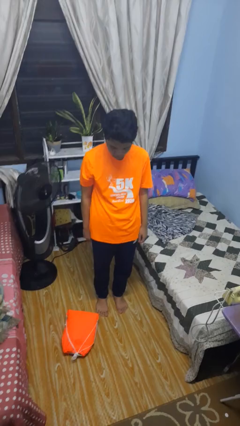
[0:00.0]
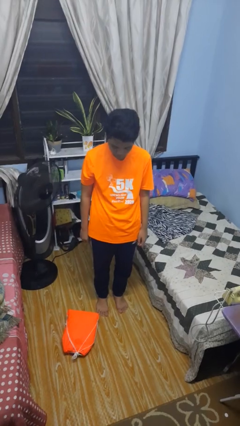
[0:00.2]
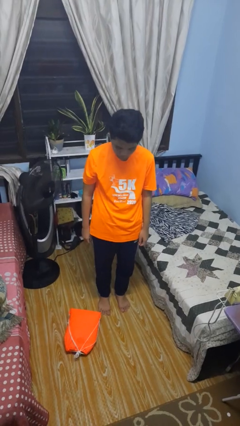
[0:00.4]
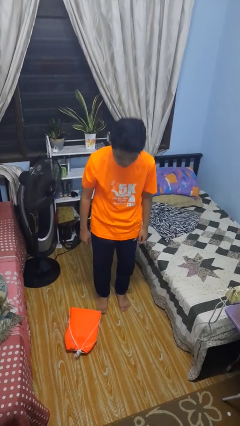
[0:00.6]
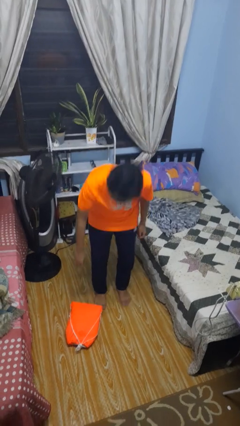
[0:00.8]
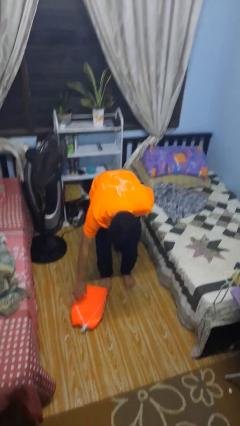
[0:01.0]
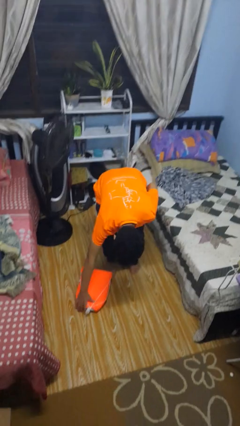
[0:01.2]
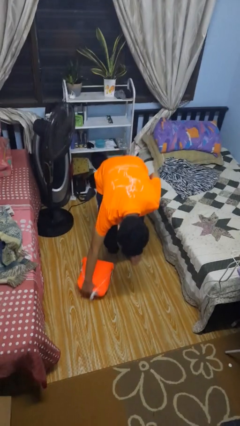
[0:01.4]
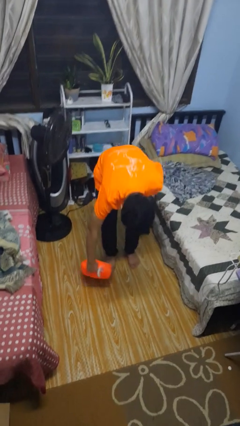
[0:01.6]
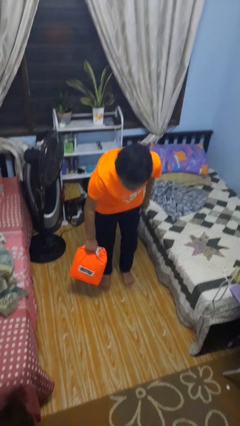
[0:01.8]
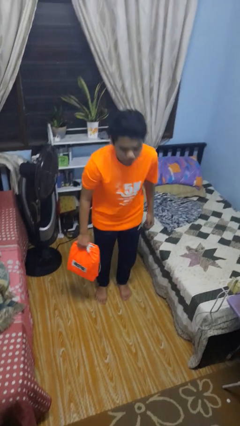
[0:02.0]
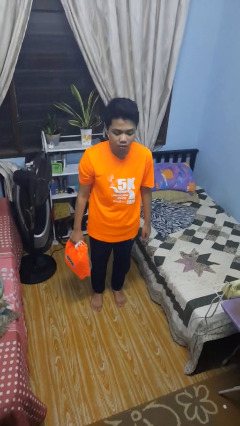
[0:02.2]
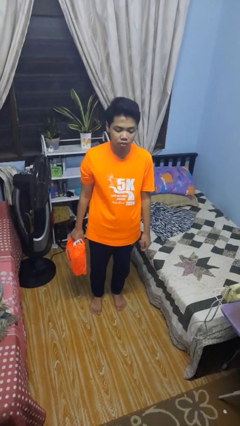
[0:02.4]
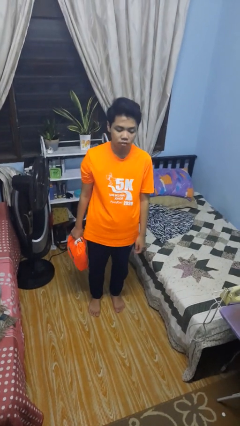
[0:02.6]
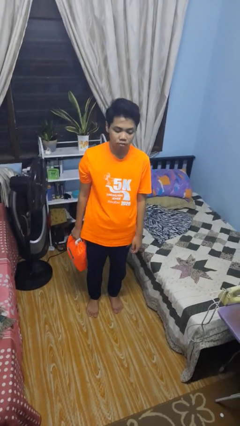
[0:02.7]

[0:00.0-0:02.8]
person picks up object from floor

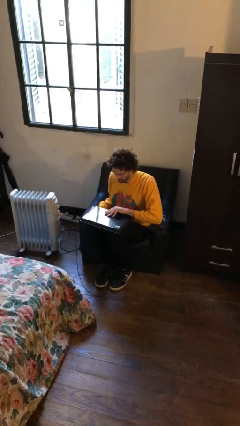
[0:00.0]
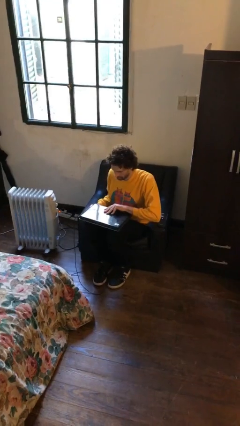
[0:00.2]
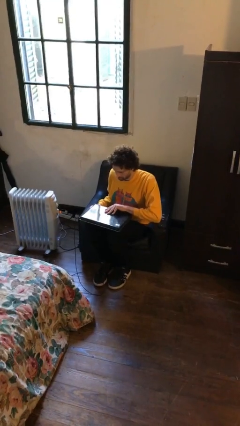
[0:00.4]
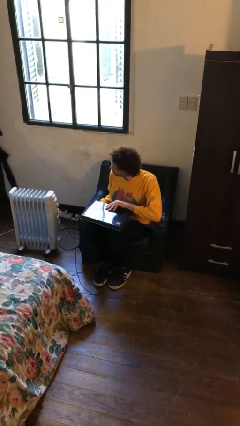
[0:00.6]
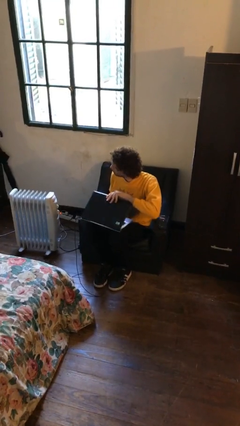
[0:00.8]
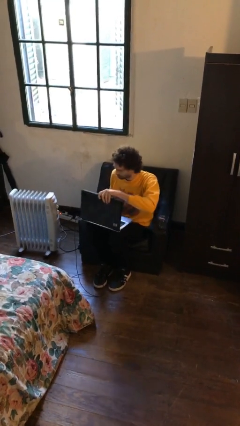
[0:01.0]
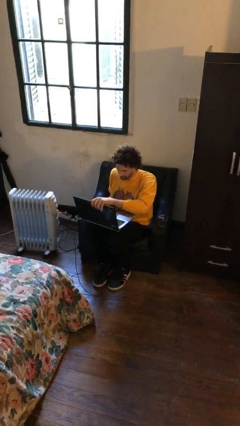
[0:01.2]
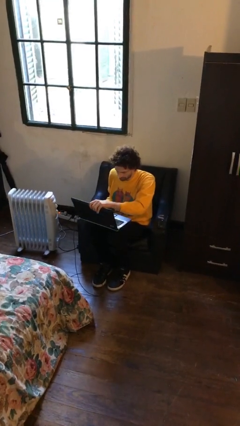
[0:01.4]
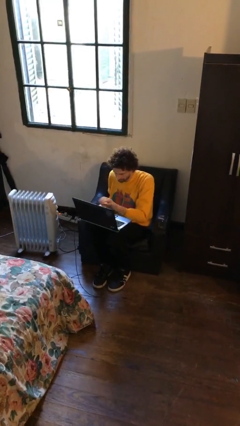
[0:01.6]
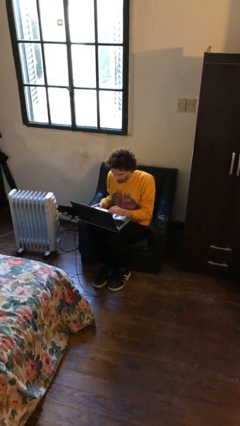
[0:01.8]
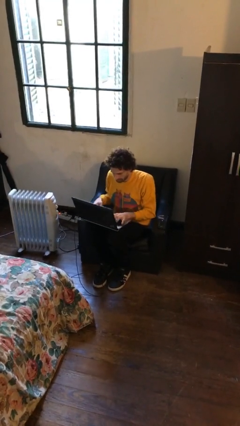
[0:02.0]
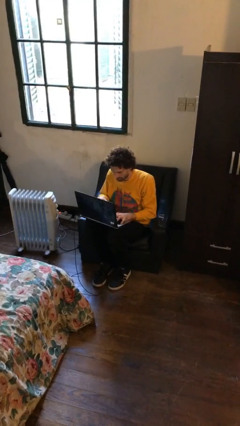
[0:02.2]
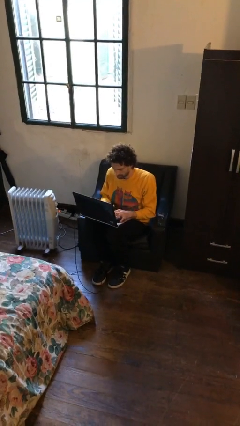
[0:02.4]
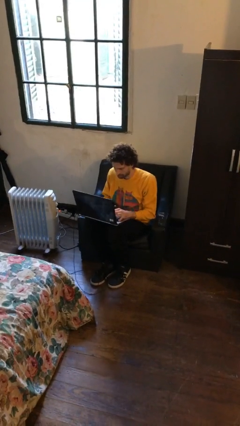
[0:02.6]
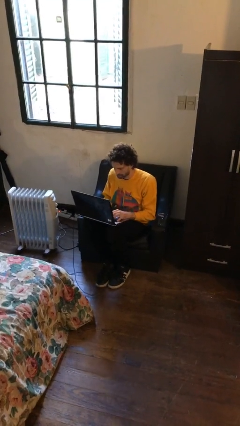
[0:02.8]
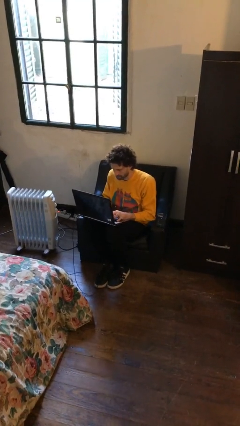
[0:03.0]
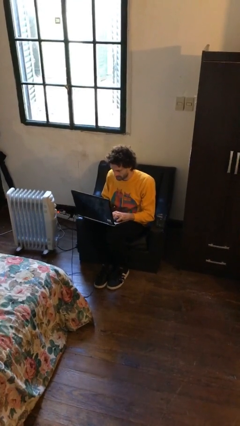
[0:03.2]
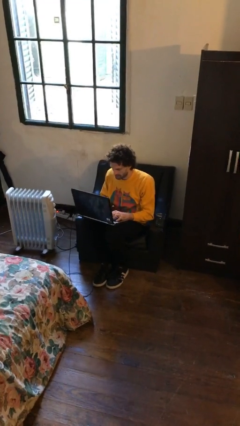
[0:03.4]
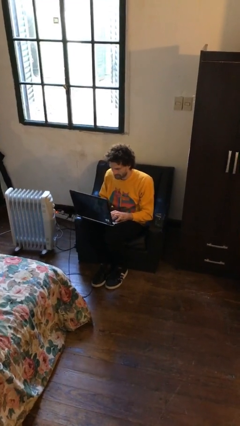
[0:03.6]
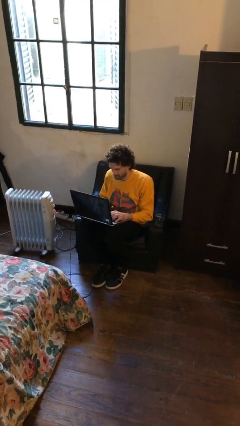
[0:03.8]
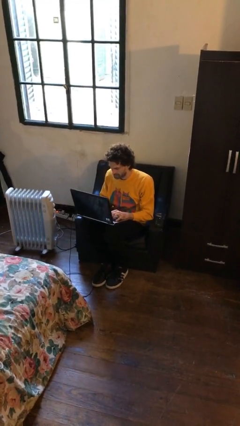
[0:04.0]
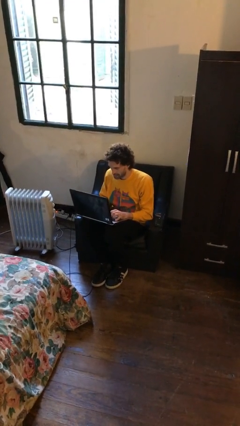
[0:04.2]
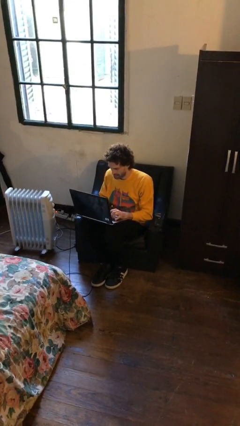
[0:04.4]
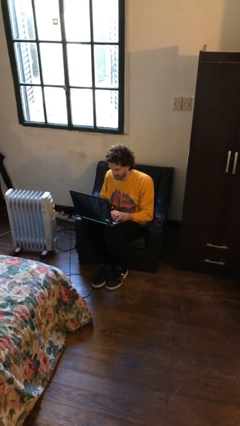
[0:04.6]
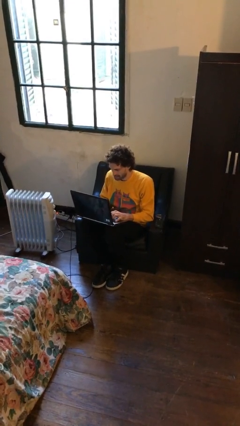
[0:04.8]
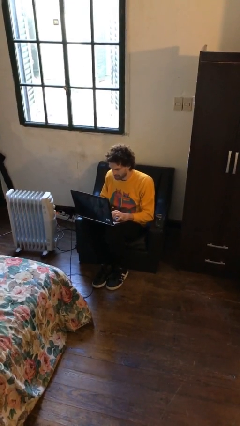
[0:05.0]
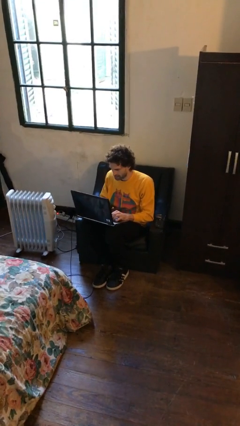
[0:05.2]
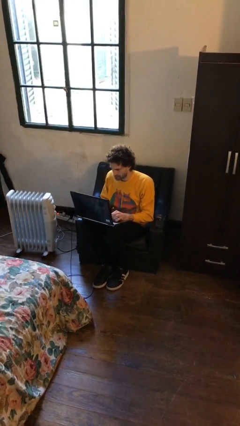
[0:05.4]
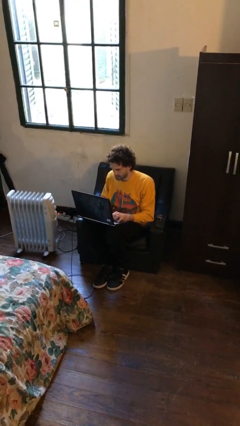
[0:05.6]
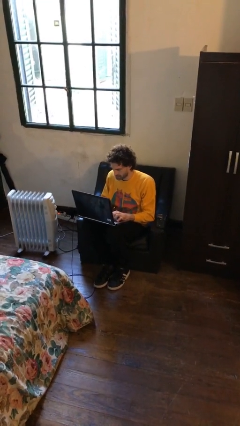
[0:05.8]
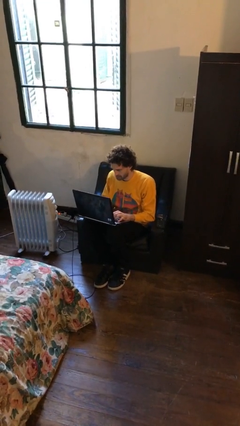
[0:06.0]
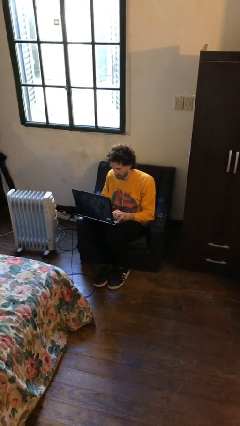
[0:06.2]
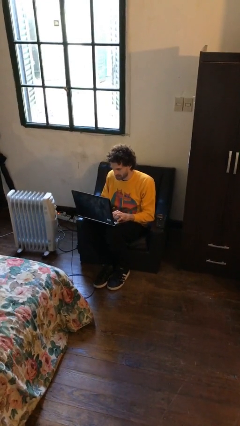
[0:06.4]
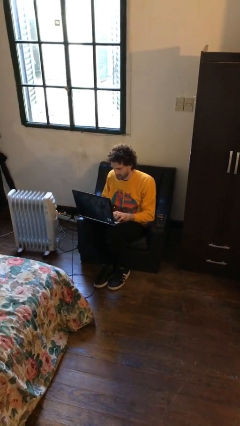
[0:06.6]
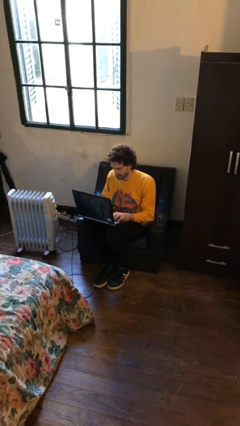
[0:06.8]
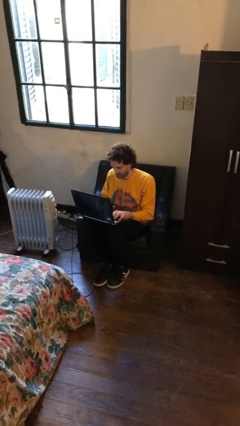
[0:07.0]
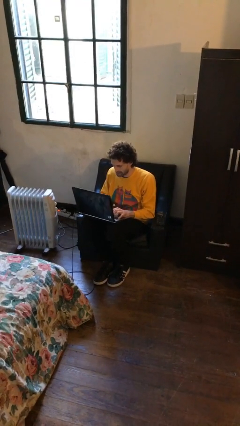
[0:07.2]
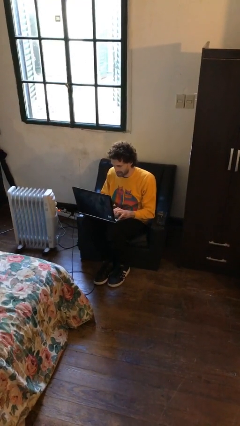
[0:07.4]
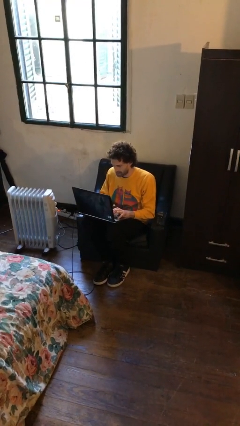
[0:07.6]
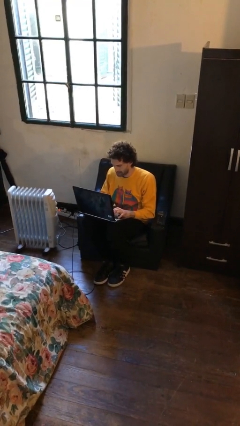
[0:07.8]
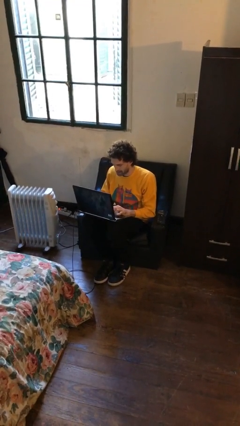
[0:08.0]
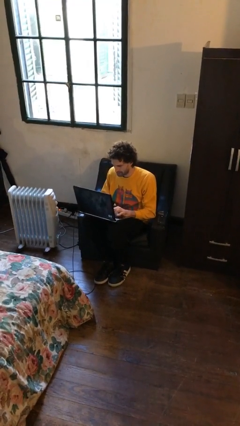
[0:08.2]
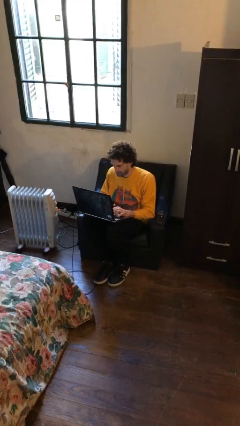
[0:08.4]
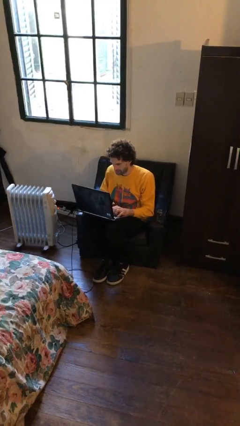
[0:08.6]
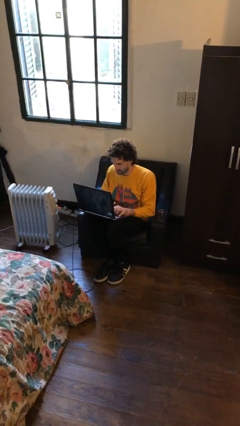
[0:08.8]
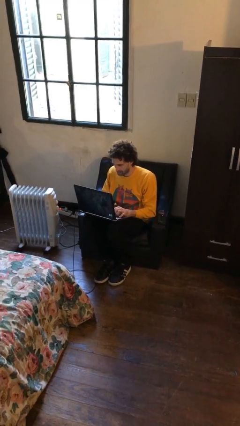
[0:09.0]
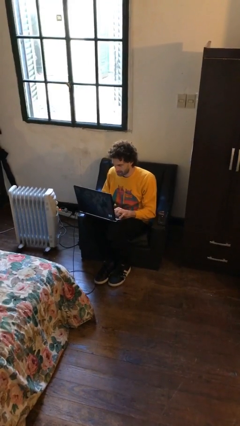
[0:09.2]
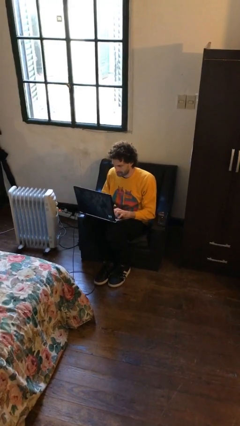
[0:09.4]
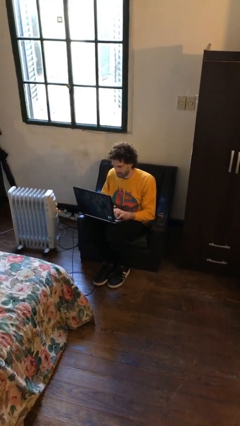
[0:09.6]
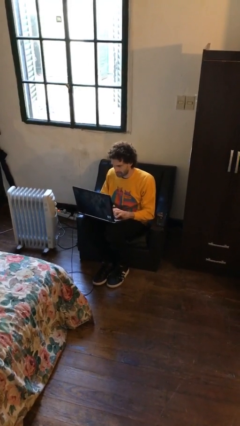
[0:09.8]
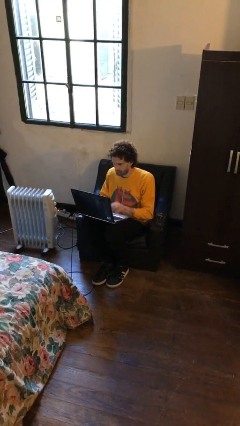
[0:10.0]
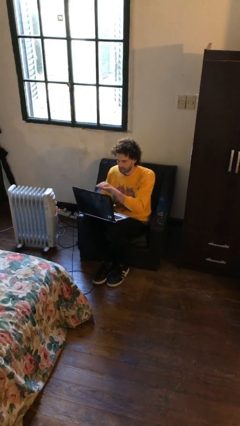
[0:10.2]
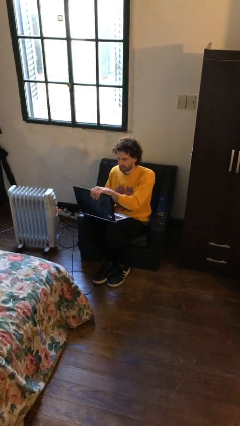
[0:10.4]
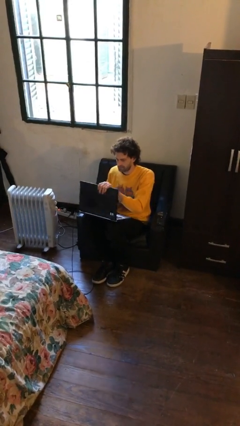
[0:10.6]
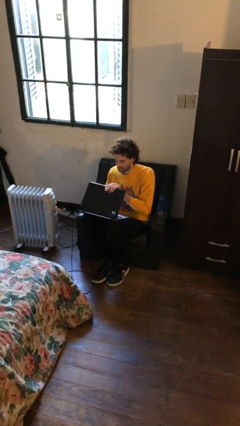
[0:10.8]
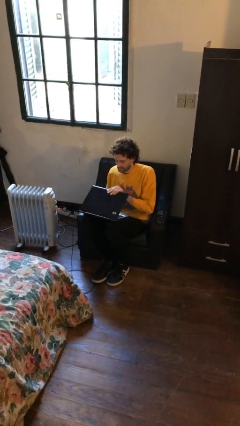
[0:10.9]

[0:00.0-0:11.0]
person interacts with laptop

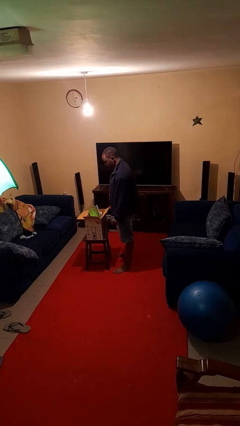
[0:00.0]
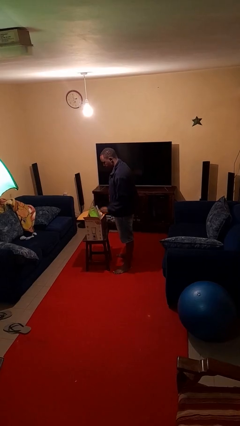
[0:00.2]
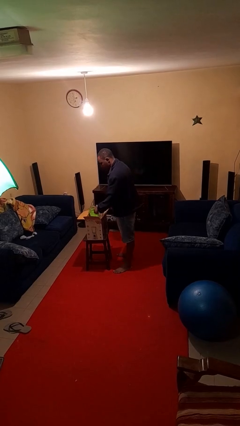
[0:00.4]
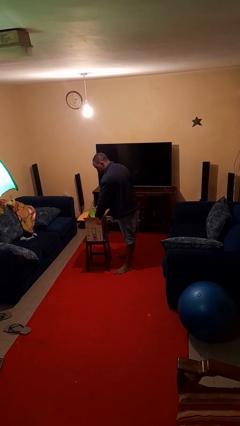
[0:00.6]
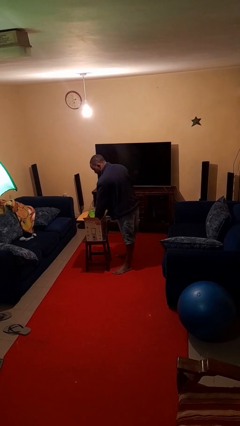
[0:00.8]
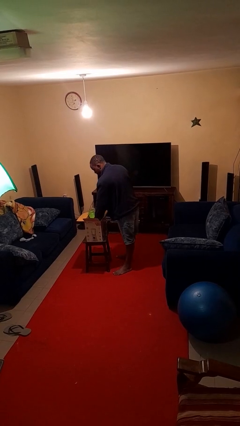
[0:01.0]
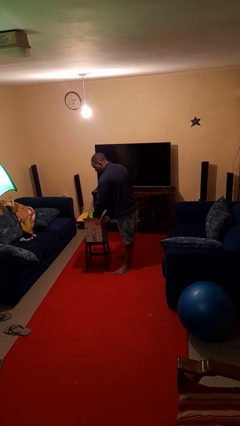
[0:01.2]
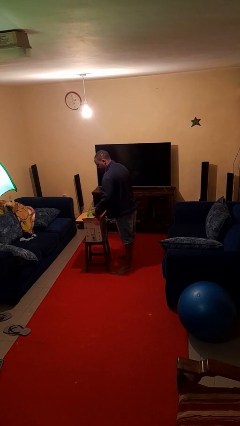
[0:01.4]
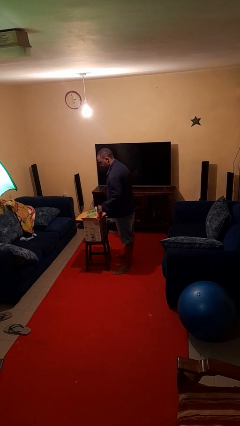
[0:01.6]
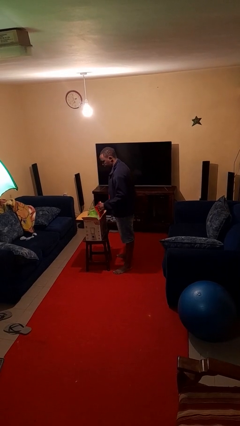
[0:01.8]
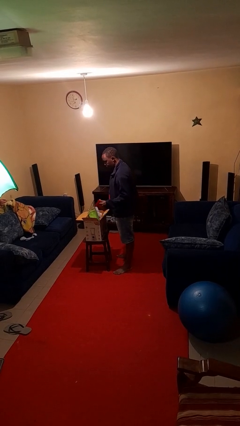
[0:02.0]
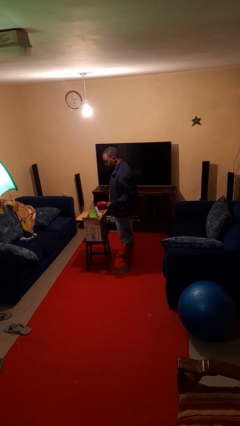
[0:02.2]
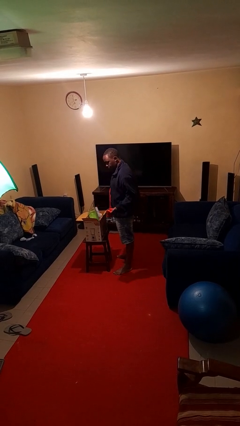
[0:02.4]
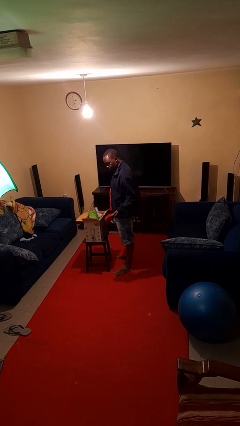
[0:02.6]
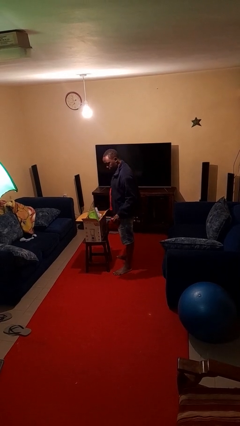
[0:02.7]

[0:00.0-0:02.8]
person takes object from box

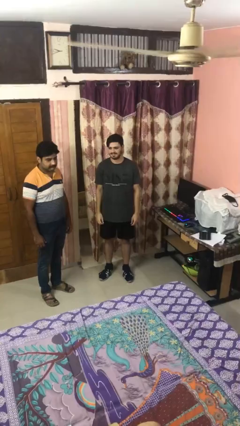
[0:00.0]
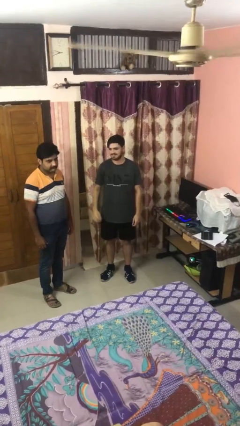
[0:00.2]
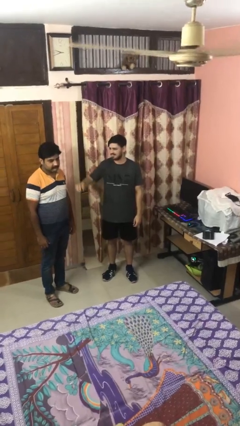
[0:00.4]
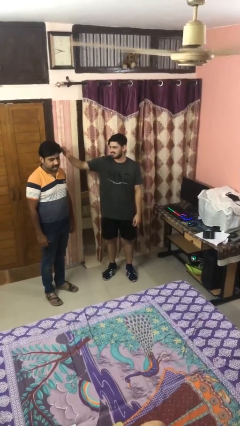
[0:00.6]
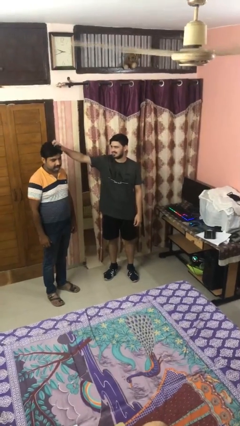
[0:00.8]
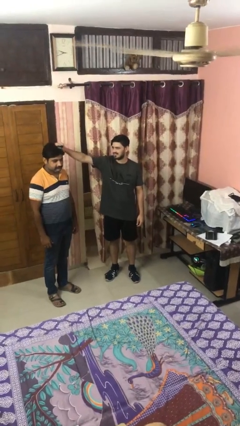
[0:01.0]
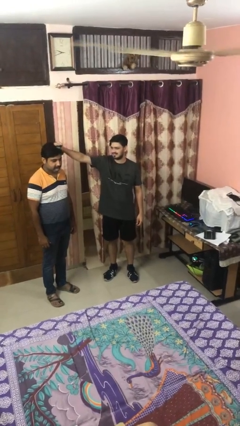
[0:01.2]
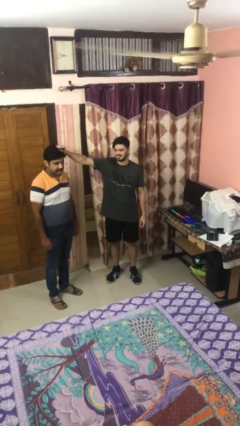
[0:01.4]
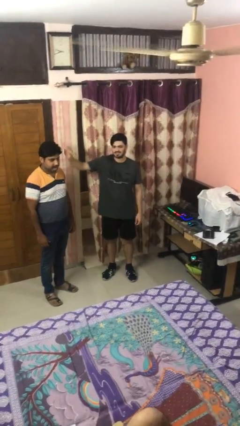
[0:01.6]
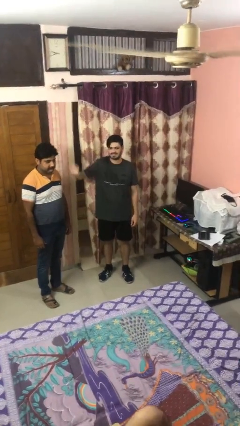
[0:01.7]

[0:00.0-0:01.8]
person grabs person by hair
